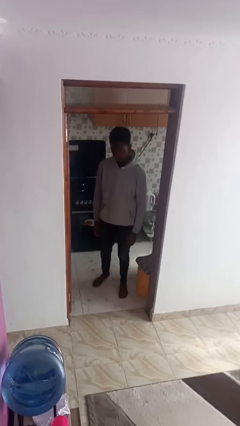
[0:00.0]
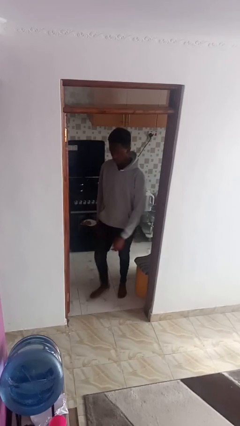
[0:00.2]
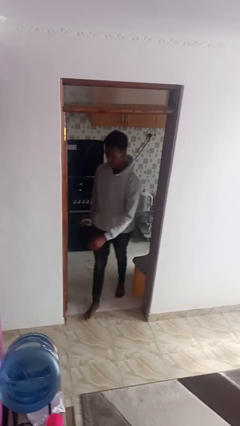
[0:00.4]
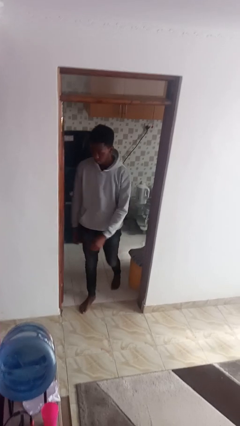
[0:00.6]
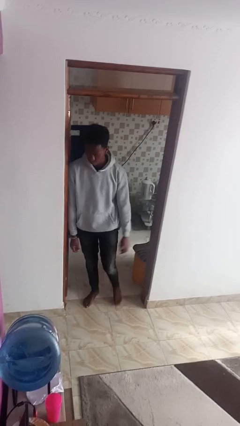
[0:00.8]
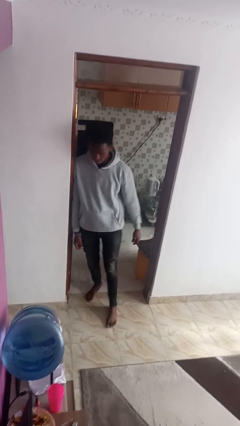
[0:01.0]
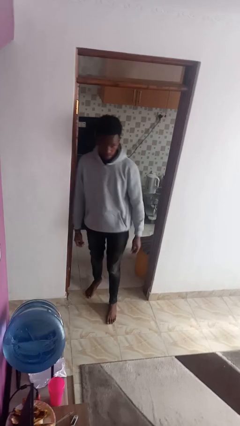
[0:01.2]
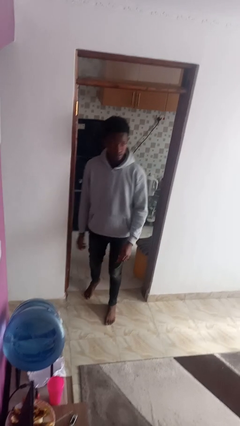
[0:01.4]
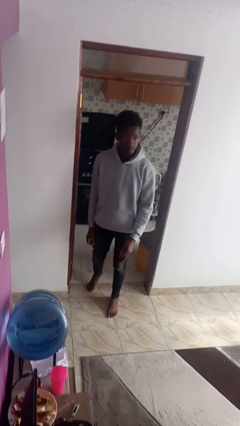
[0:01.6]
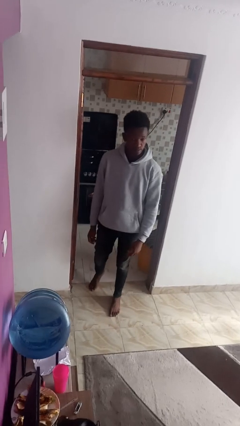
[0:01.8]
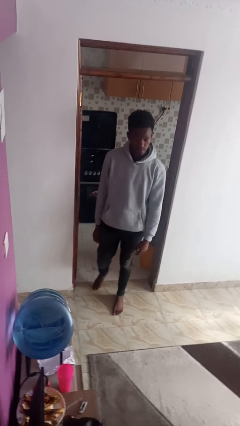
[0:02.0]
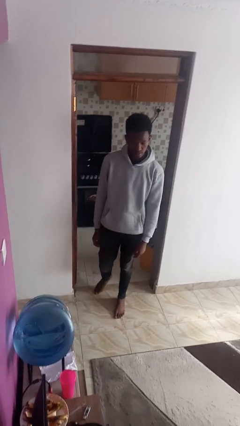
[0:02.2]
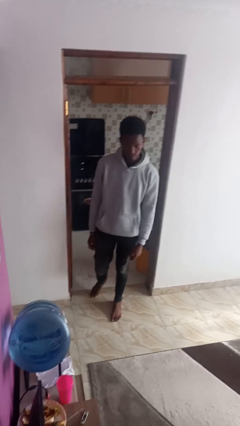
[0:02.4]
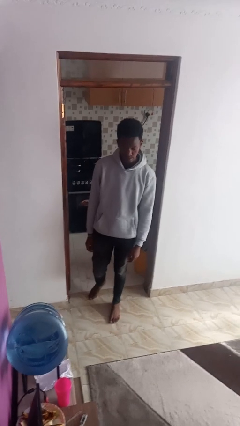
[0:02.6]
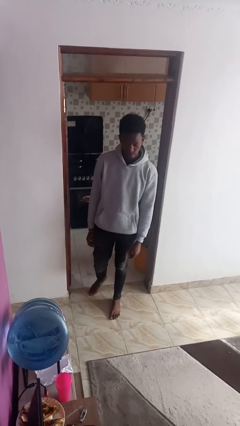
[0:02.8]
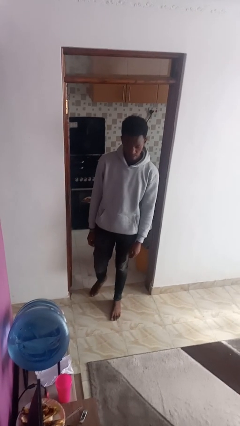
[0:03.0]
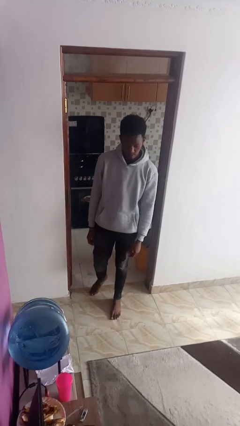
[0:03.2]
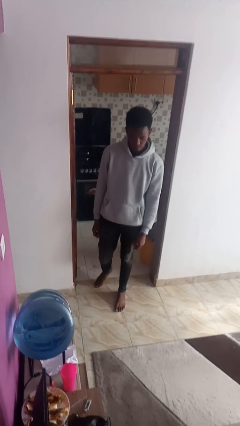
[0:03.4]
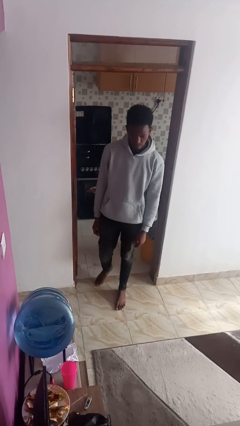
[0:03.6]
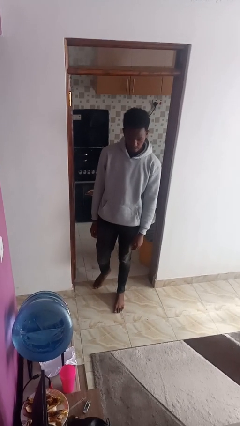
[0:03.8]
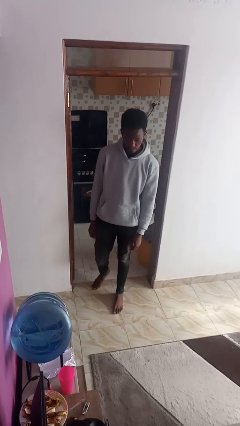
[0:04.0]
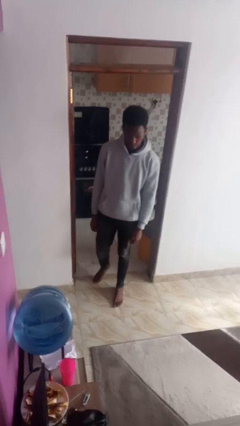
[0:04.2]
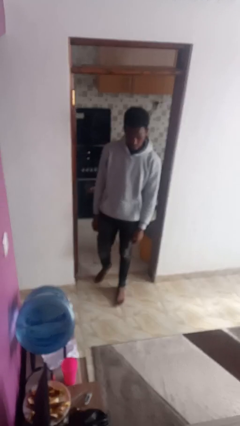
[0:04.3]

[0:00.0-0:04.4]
person bumps into wall

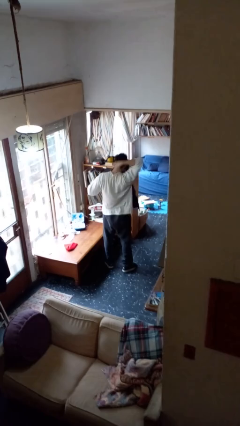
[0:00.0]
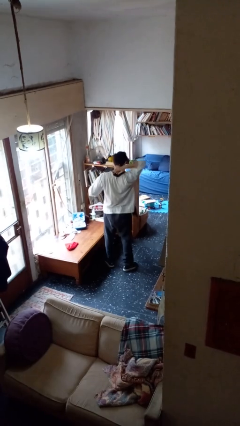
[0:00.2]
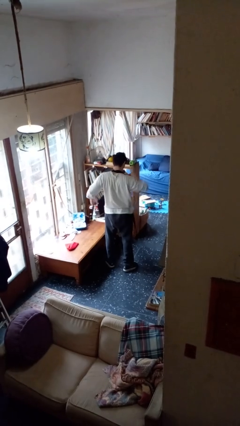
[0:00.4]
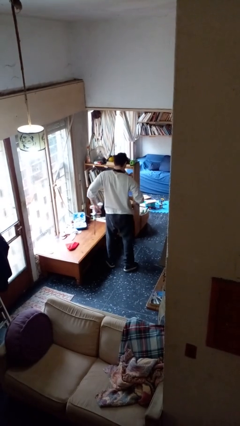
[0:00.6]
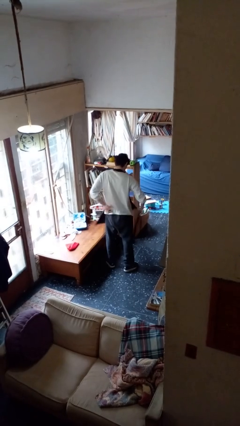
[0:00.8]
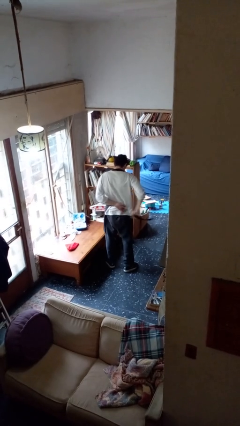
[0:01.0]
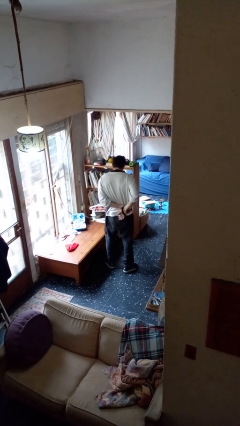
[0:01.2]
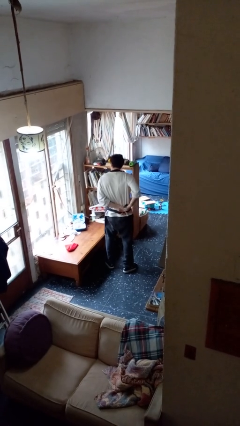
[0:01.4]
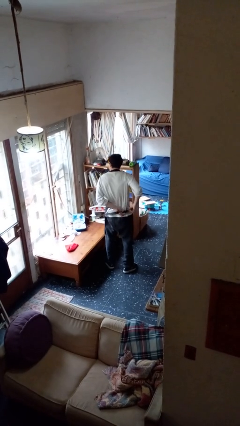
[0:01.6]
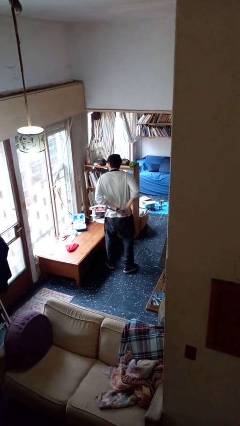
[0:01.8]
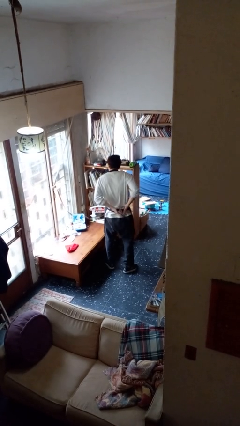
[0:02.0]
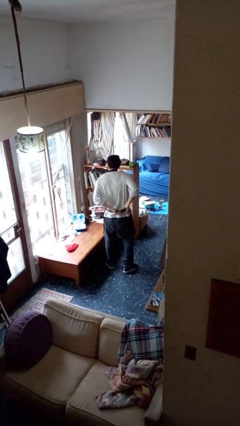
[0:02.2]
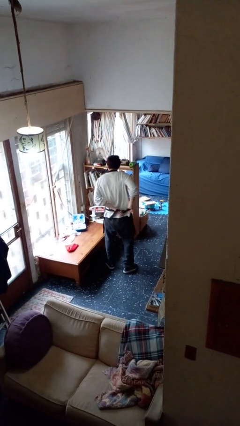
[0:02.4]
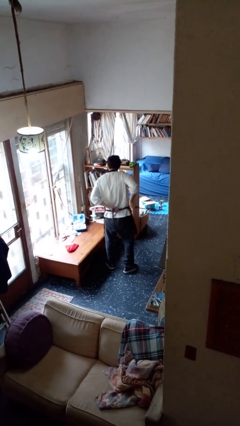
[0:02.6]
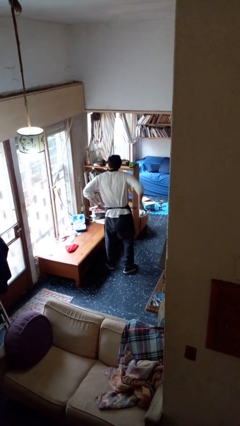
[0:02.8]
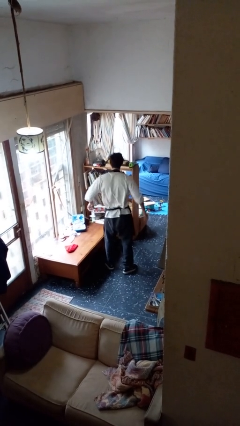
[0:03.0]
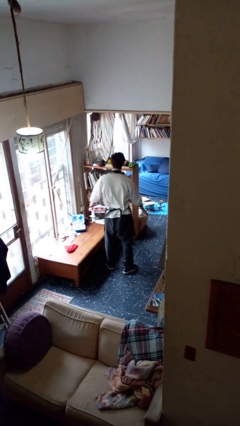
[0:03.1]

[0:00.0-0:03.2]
person puts on apron

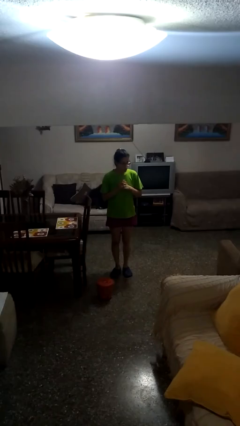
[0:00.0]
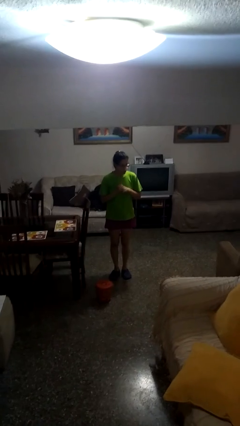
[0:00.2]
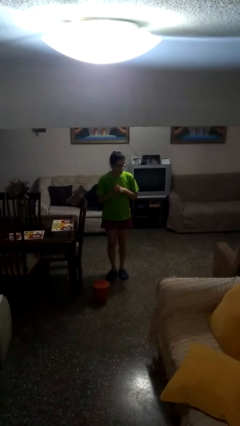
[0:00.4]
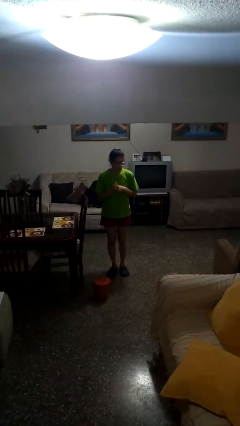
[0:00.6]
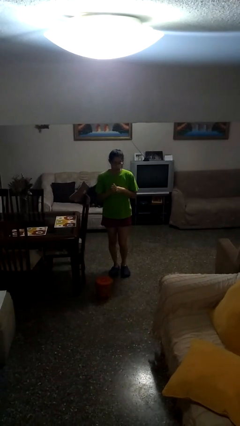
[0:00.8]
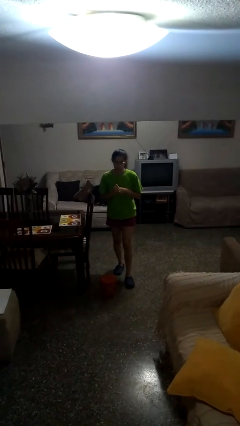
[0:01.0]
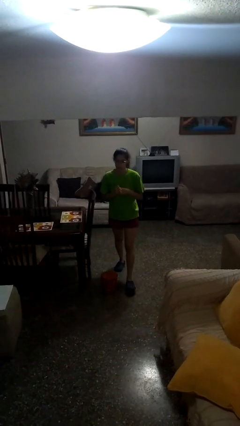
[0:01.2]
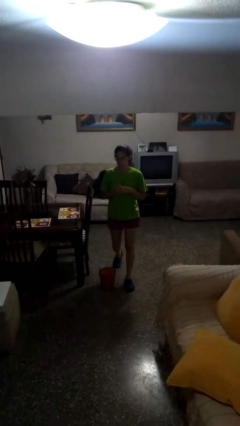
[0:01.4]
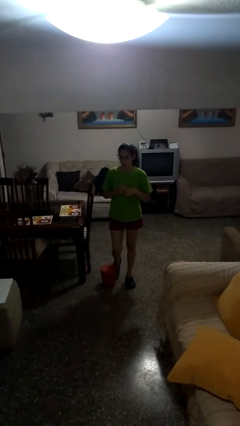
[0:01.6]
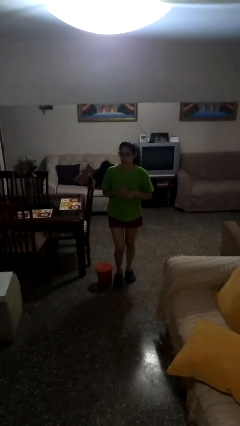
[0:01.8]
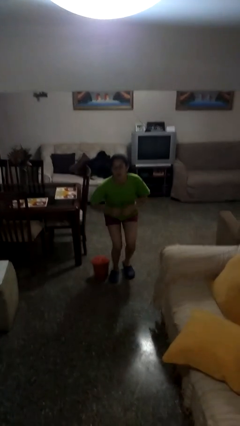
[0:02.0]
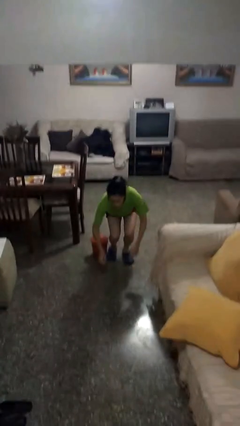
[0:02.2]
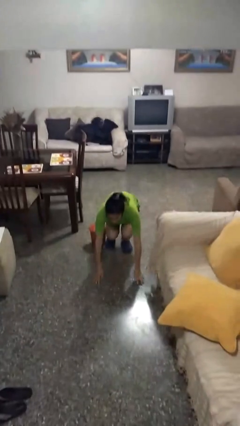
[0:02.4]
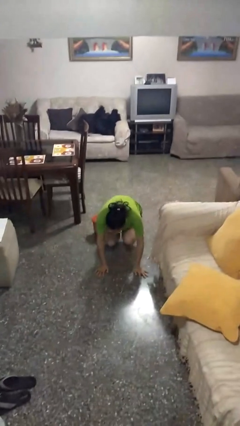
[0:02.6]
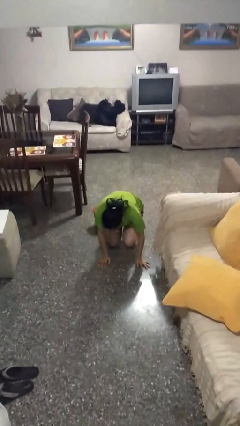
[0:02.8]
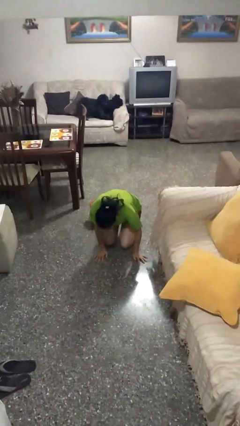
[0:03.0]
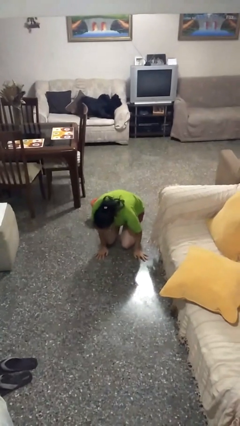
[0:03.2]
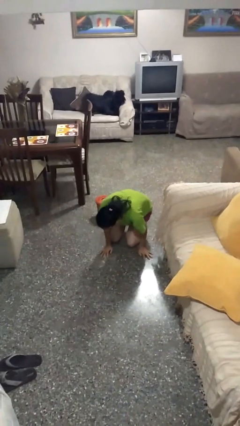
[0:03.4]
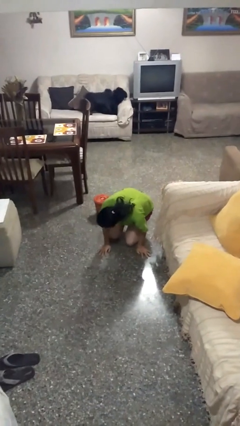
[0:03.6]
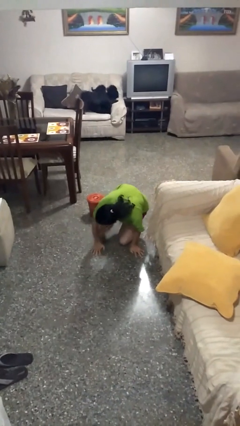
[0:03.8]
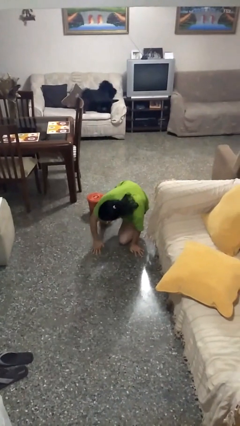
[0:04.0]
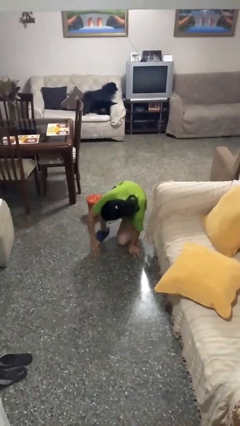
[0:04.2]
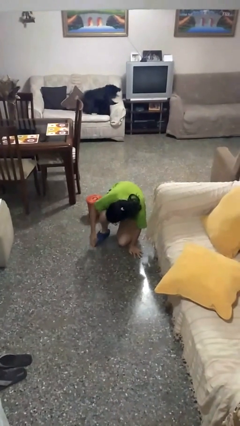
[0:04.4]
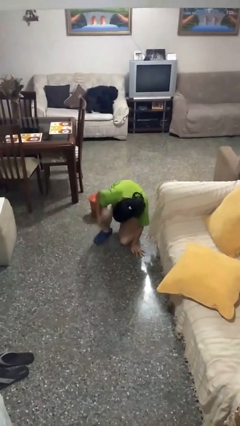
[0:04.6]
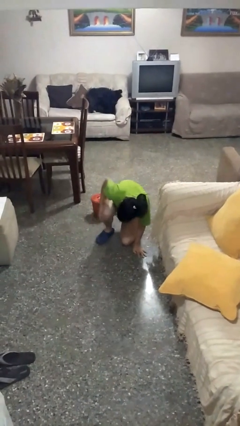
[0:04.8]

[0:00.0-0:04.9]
person trips on object on floor

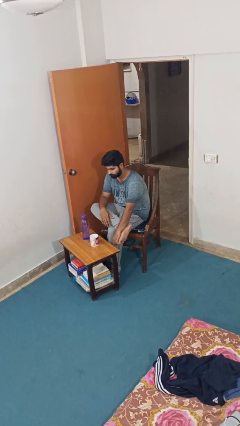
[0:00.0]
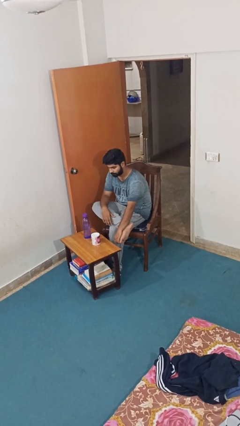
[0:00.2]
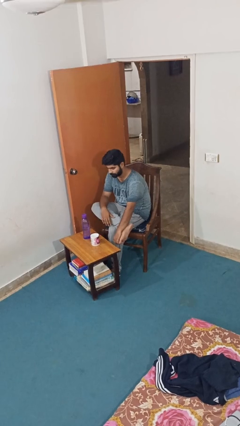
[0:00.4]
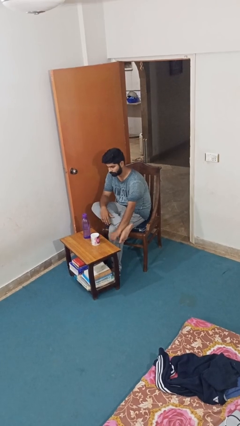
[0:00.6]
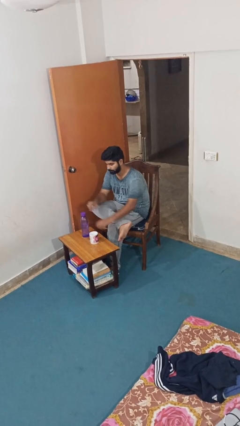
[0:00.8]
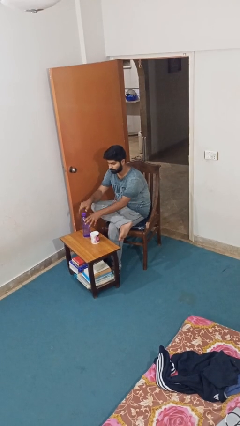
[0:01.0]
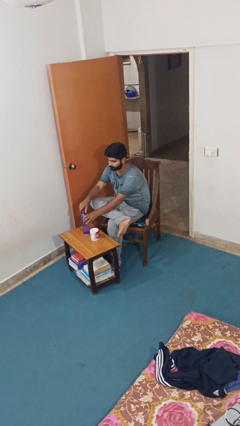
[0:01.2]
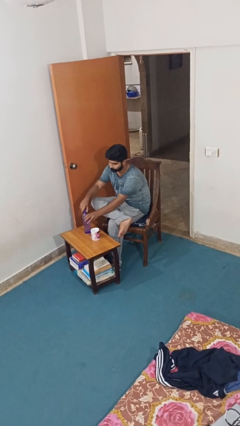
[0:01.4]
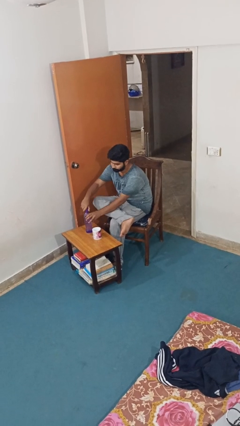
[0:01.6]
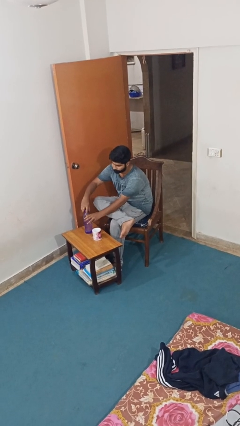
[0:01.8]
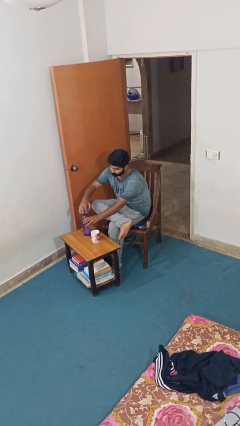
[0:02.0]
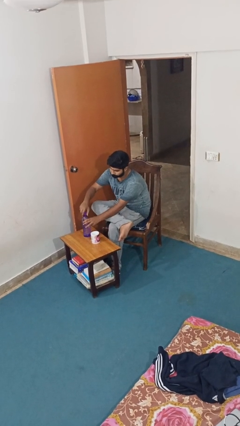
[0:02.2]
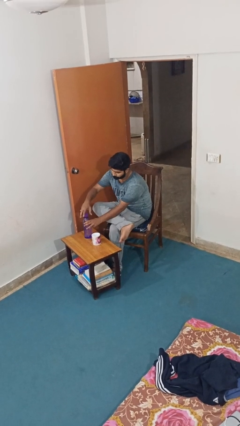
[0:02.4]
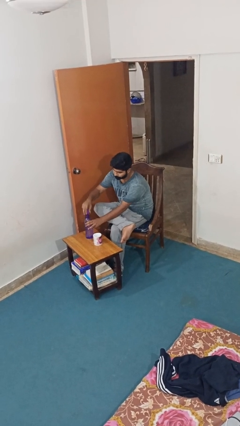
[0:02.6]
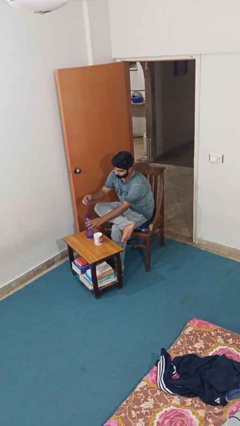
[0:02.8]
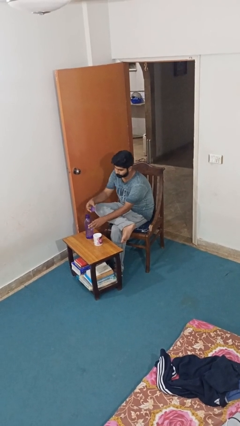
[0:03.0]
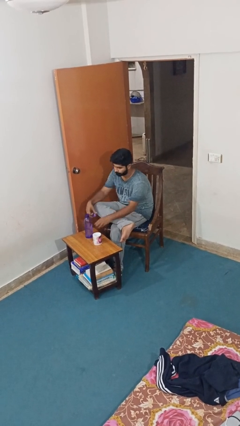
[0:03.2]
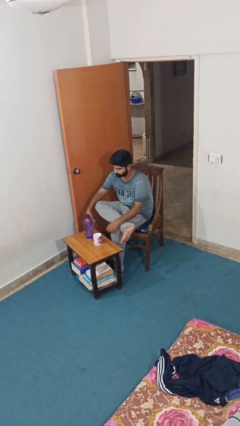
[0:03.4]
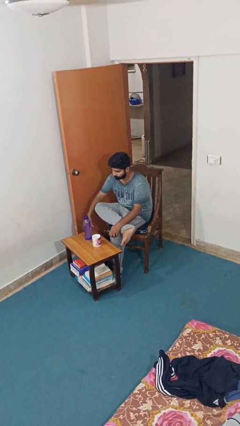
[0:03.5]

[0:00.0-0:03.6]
person unscrews lid from bottle

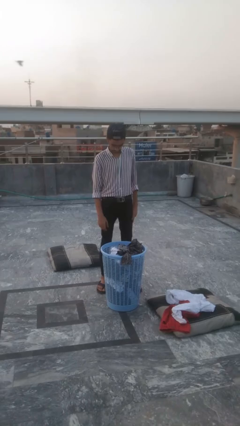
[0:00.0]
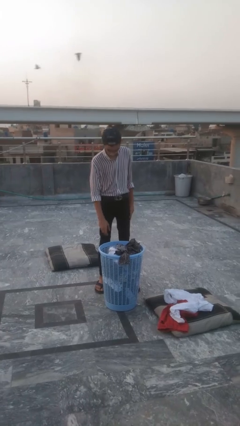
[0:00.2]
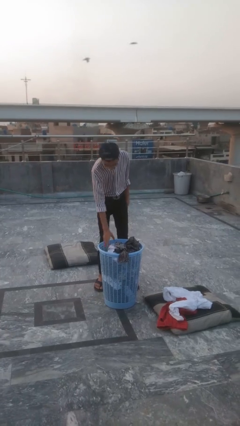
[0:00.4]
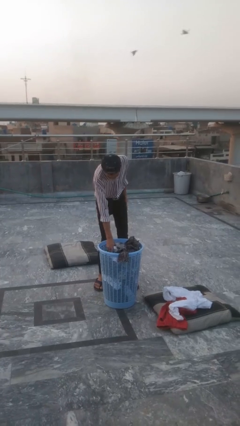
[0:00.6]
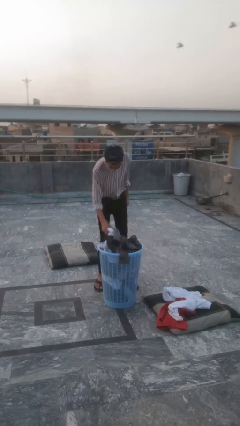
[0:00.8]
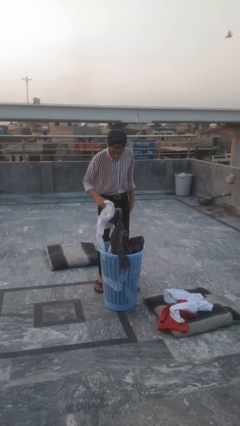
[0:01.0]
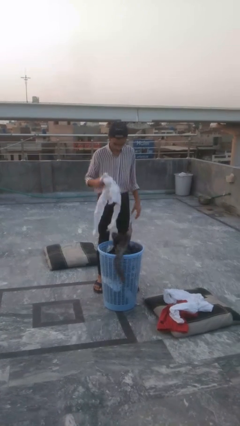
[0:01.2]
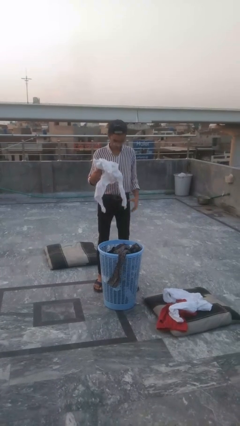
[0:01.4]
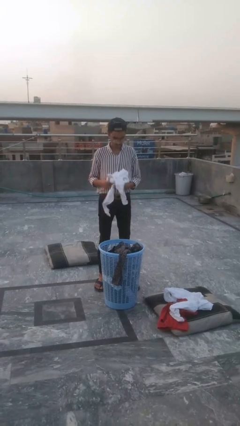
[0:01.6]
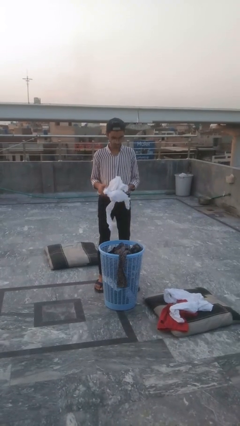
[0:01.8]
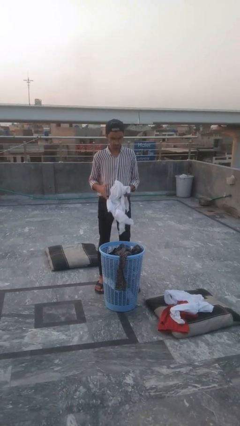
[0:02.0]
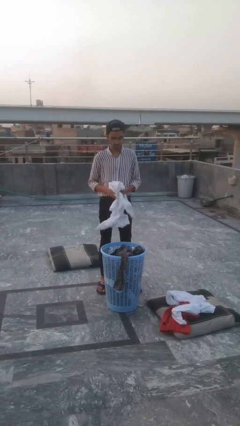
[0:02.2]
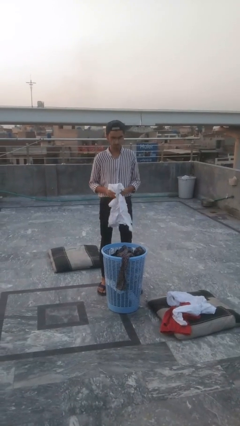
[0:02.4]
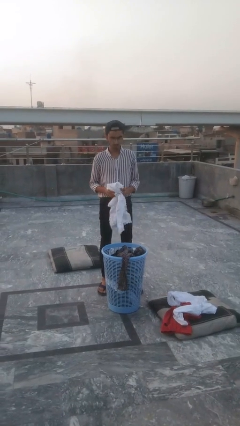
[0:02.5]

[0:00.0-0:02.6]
person takes object from basket
